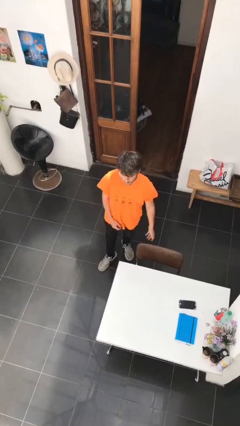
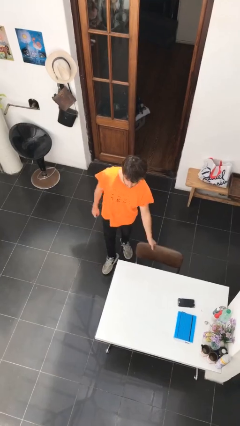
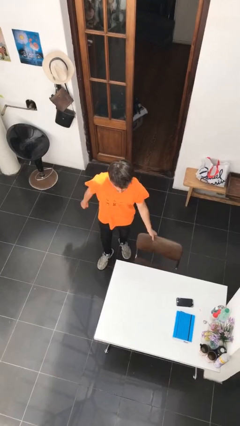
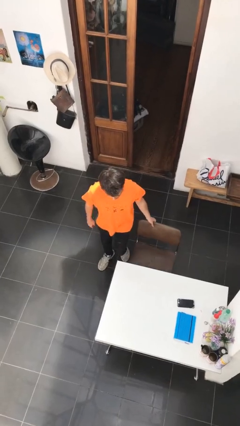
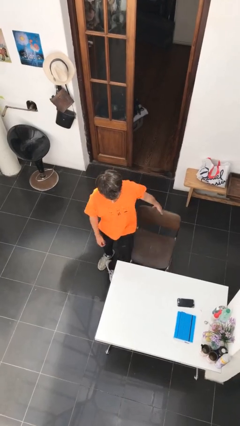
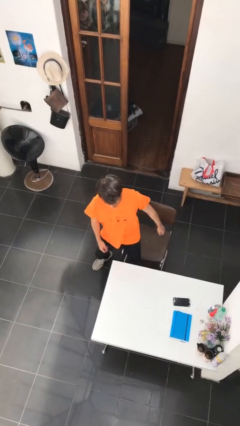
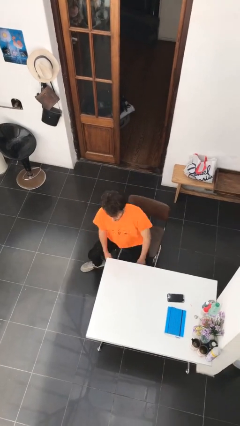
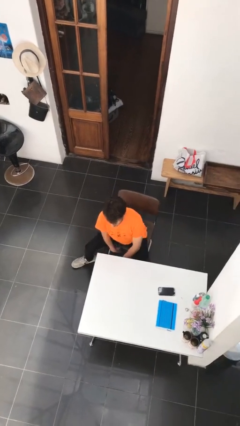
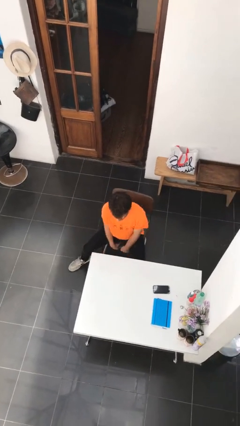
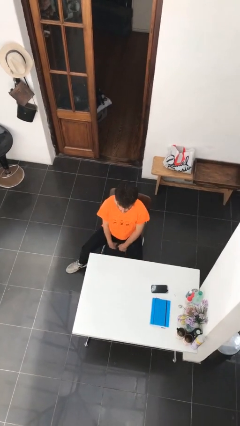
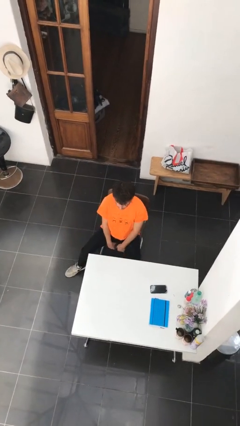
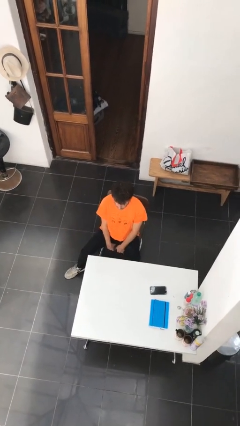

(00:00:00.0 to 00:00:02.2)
person sits down

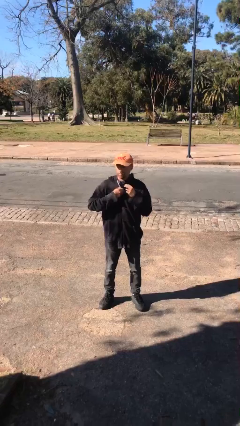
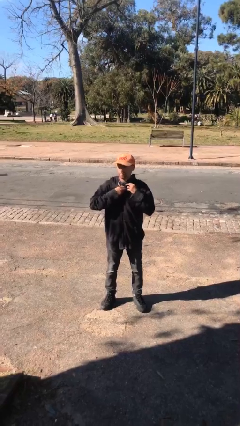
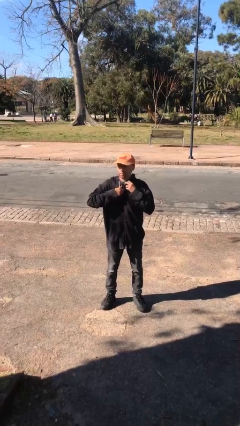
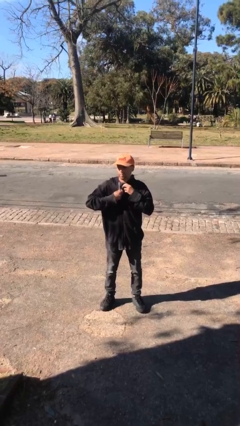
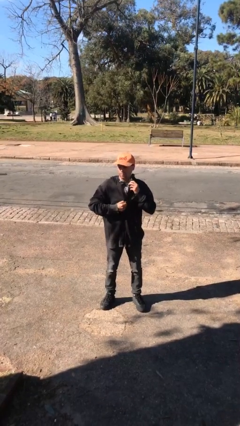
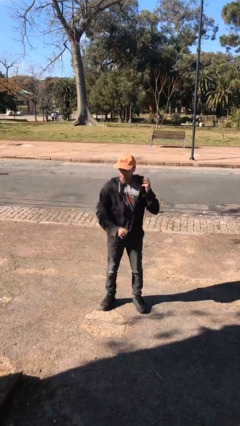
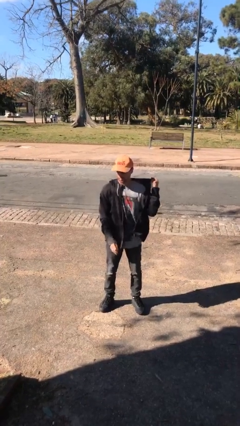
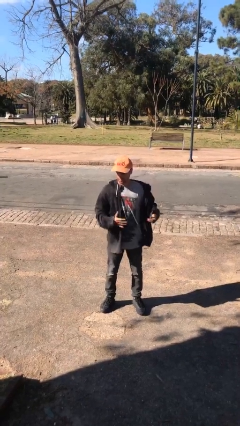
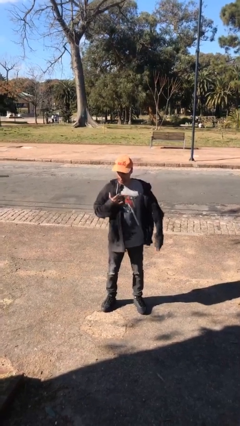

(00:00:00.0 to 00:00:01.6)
person unzips jacket

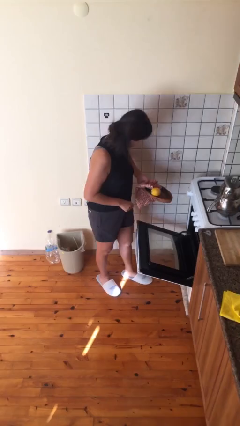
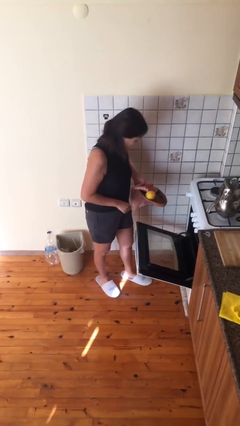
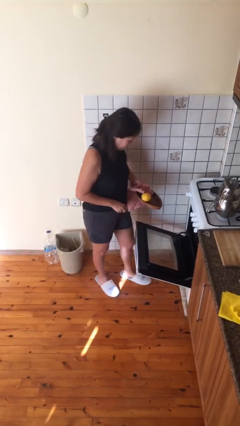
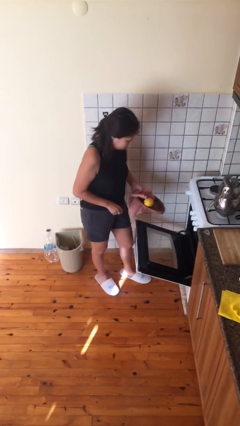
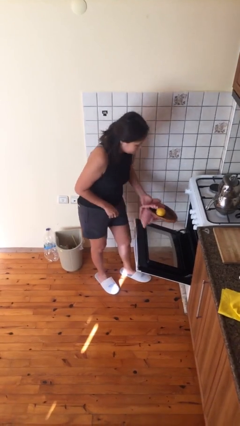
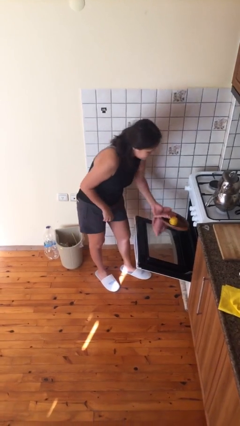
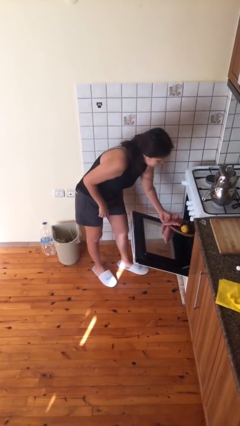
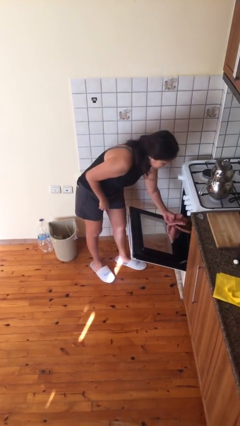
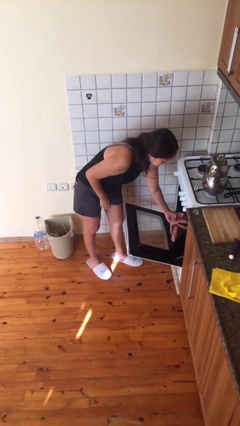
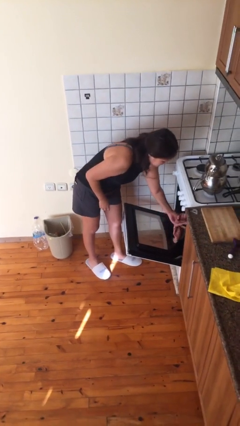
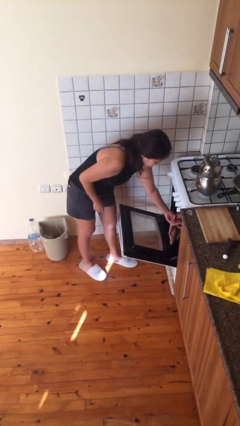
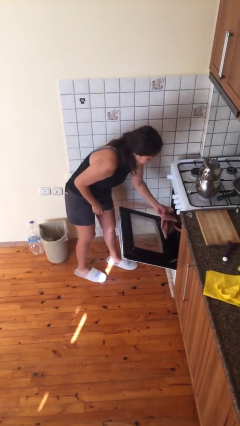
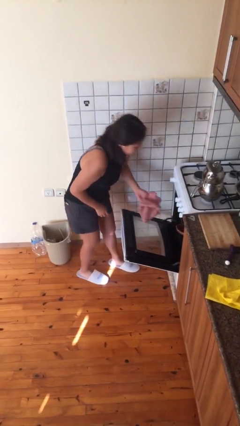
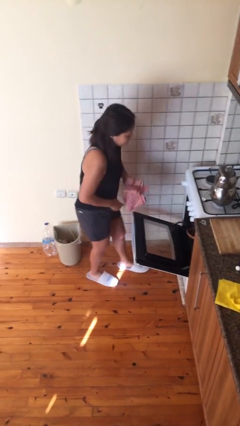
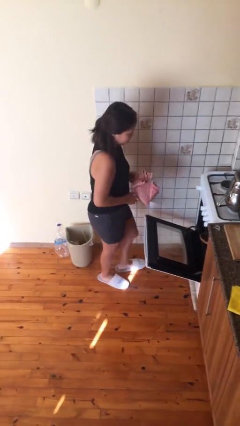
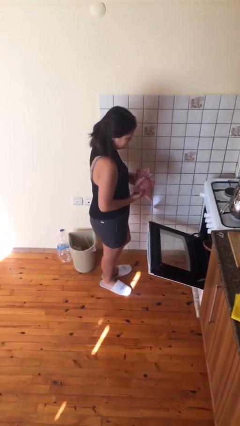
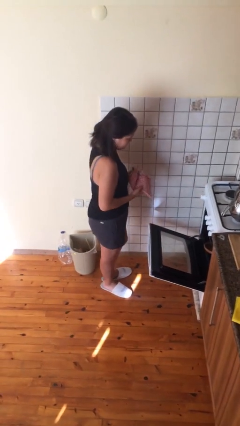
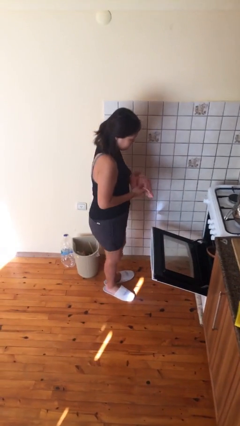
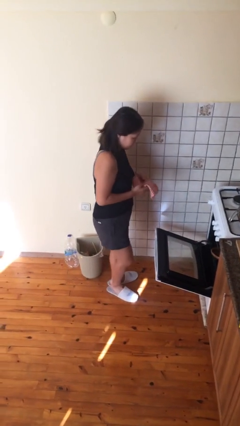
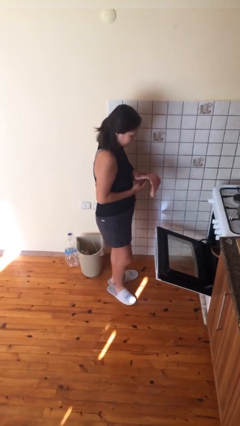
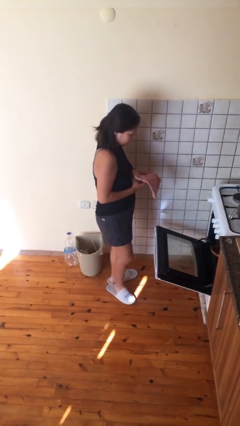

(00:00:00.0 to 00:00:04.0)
person puts object into oven

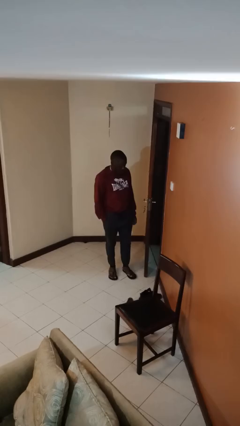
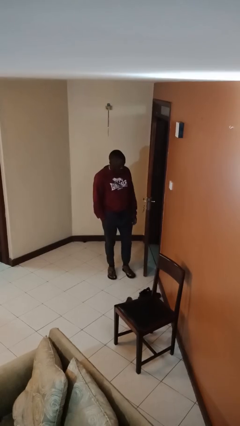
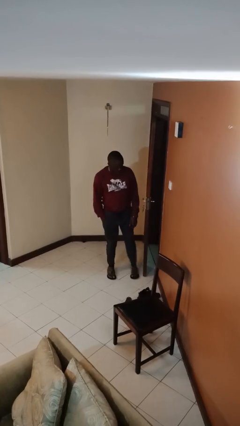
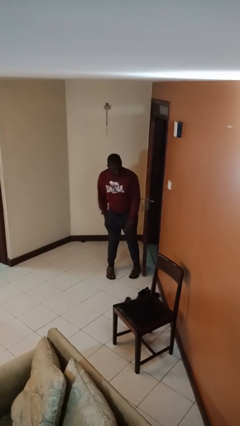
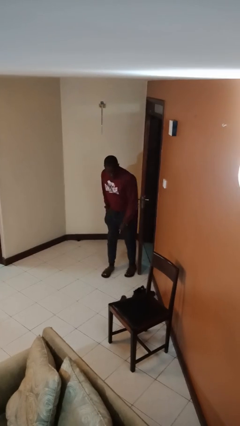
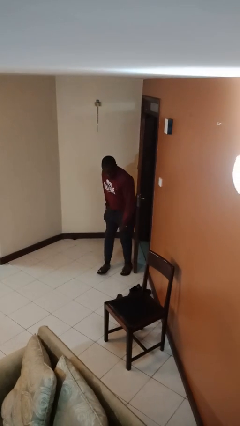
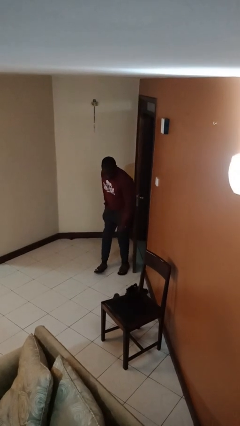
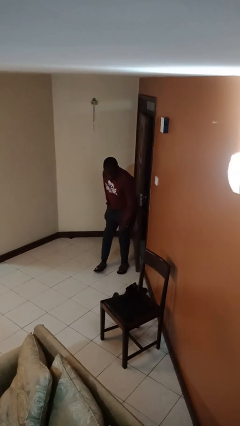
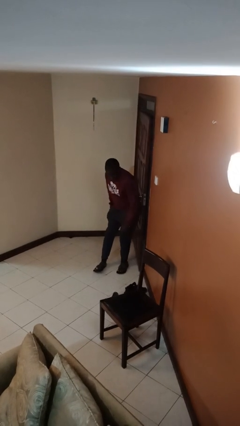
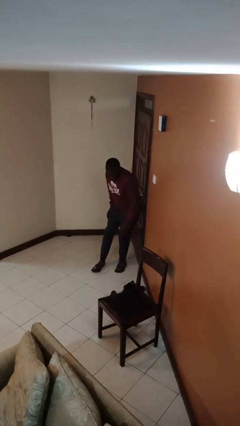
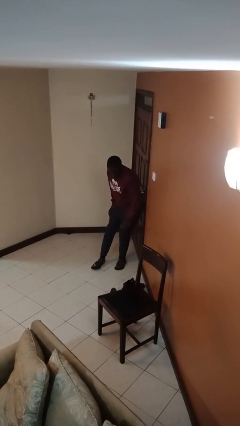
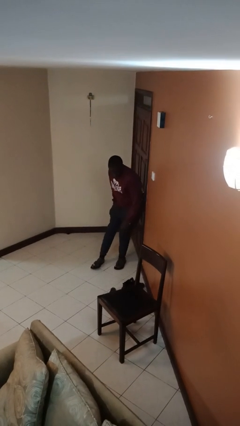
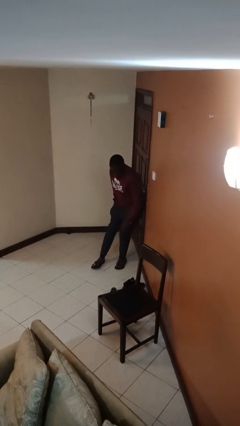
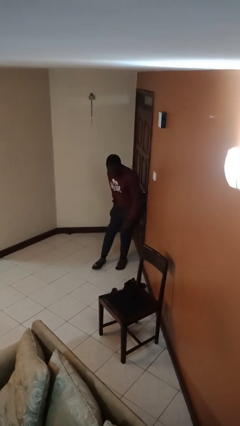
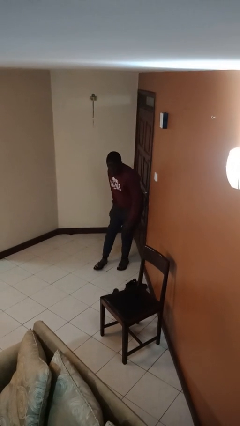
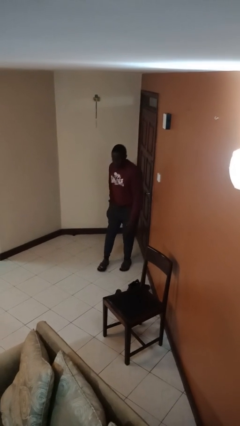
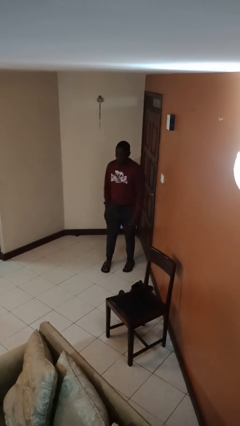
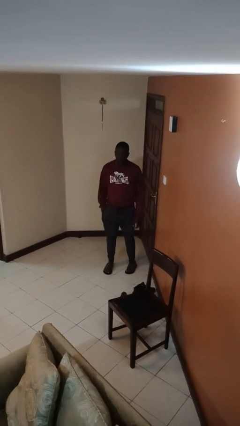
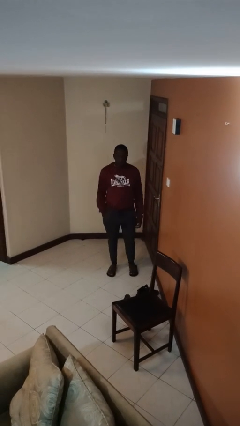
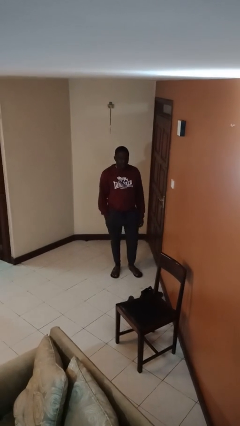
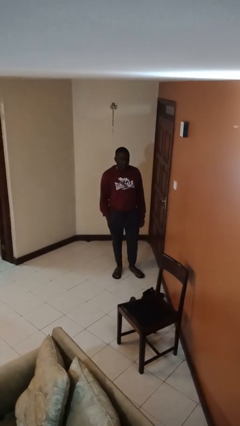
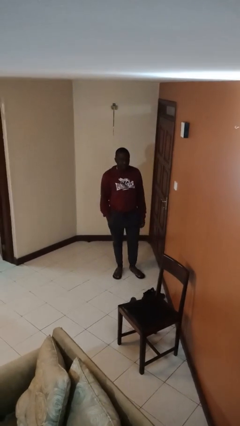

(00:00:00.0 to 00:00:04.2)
person closes door with hip

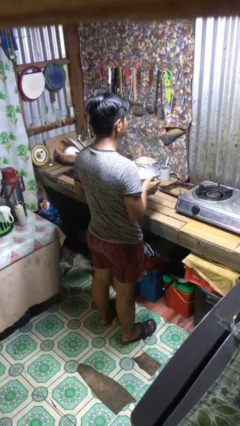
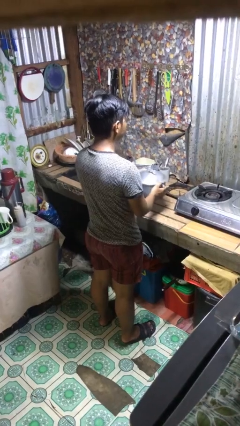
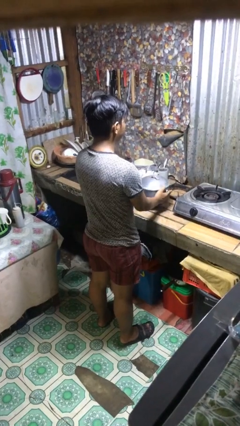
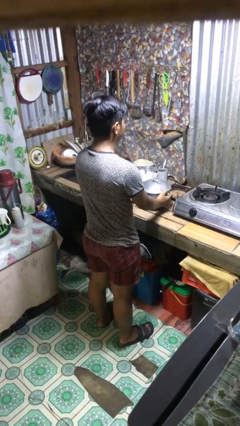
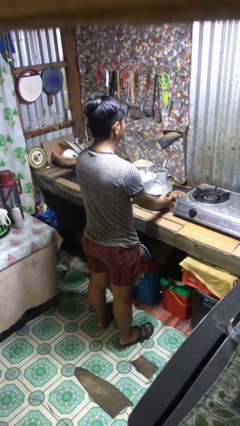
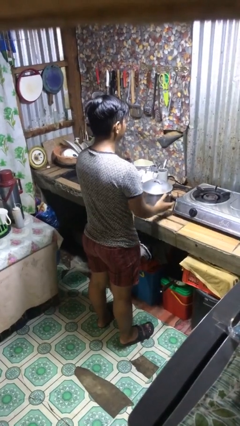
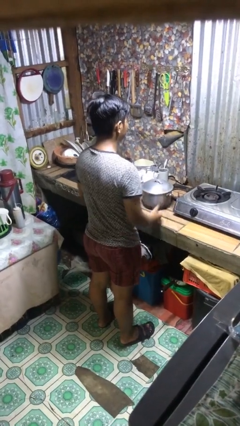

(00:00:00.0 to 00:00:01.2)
person puts down object on countertop

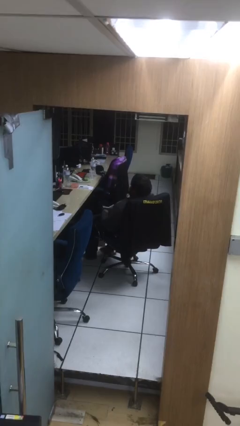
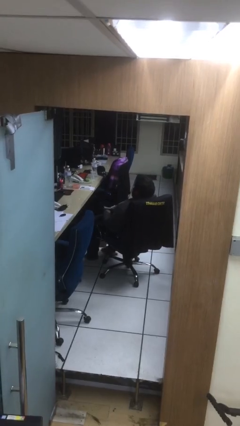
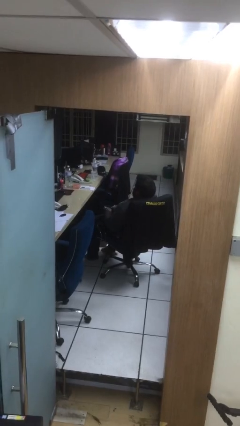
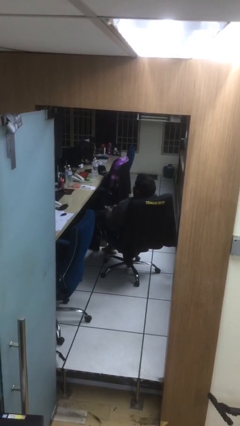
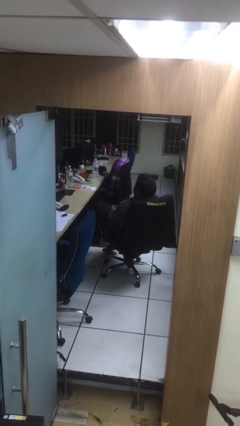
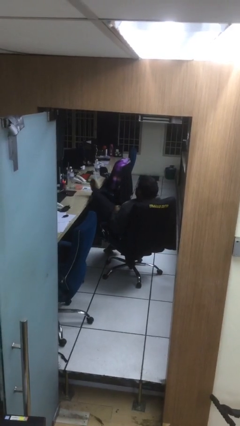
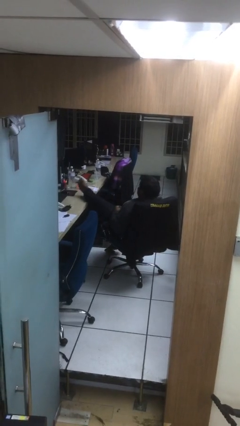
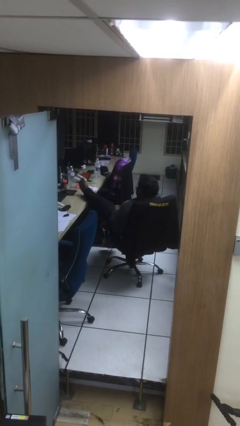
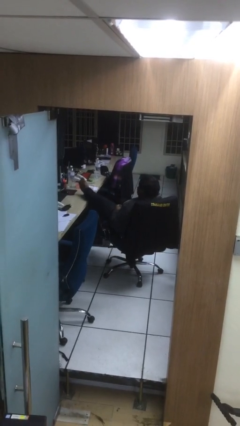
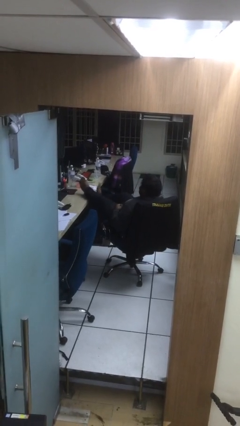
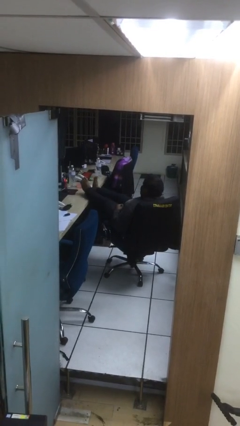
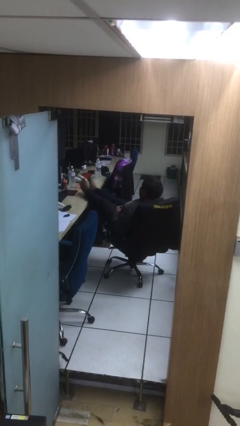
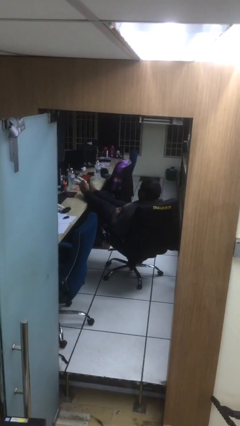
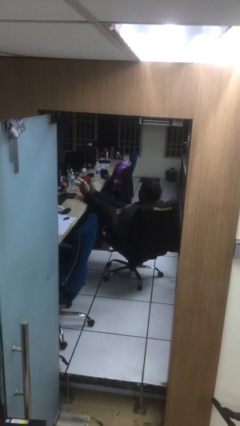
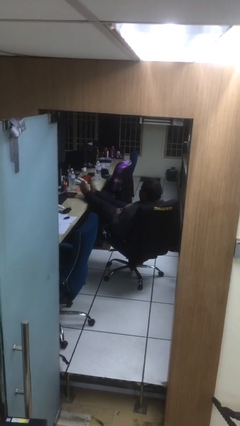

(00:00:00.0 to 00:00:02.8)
person puts feet up

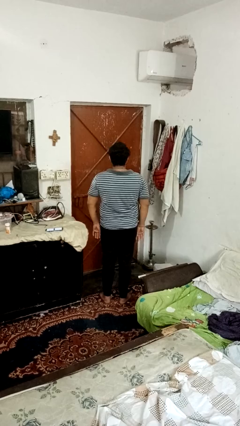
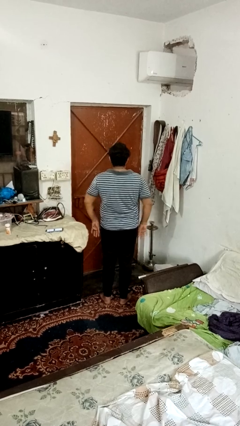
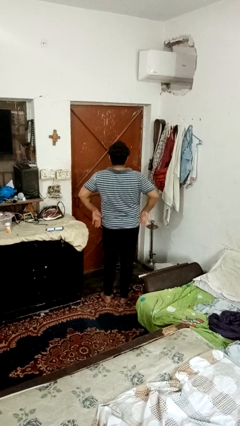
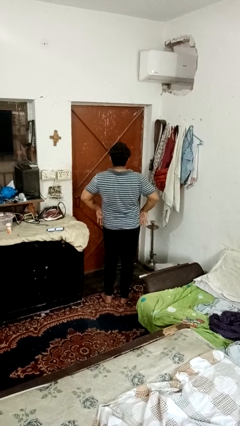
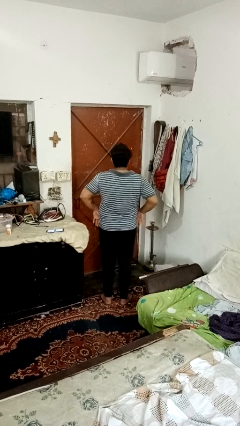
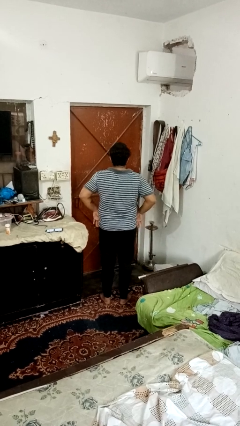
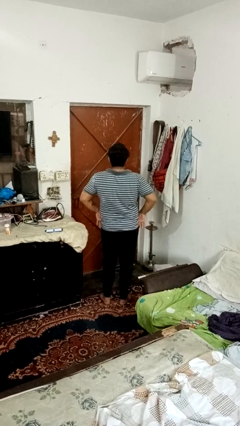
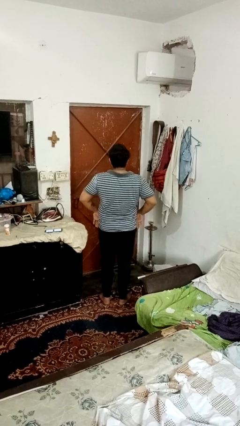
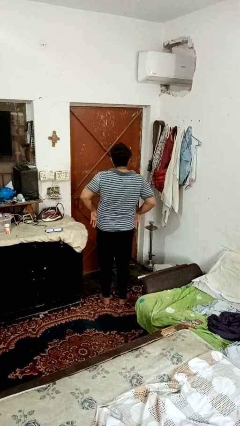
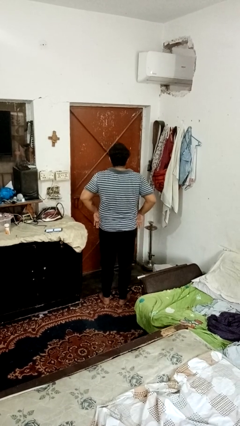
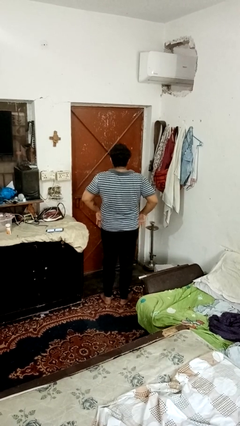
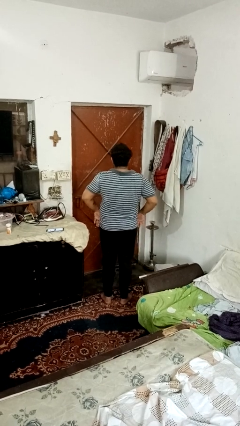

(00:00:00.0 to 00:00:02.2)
person wiggles hips
